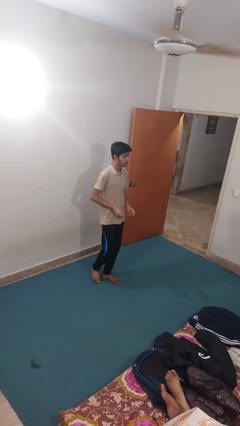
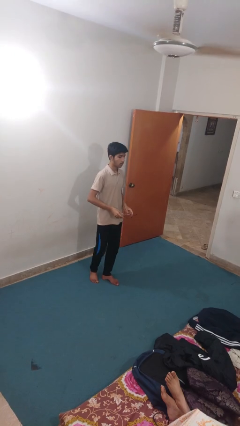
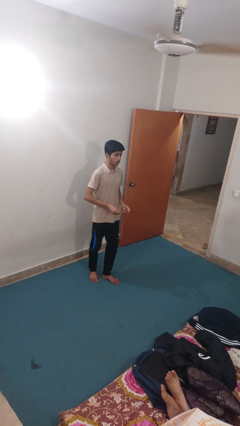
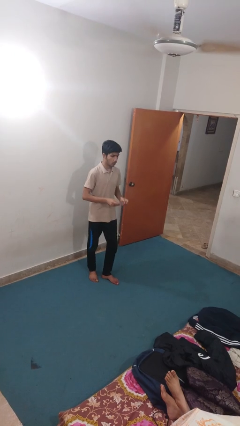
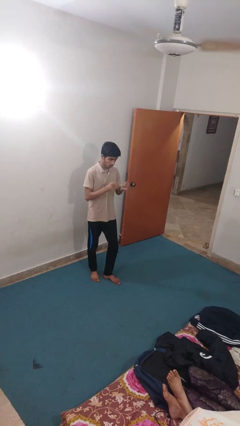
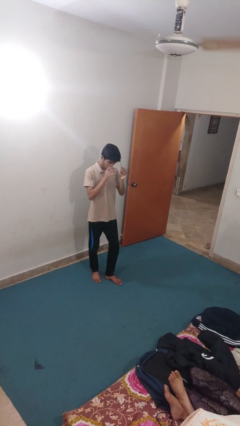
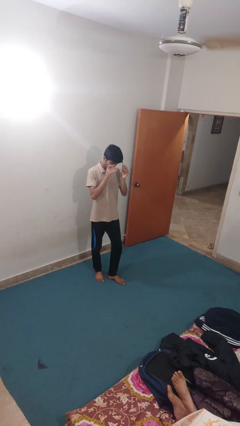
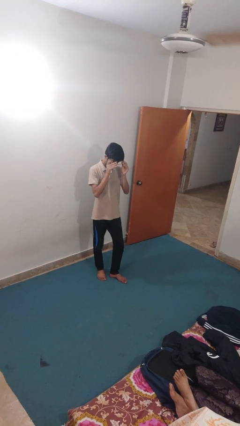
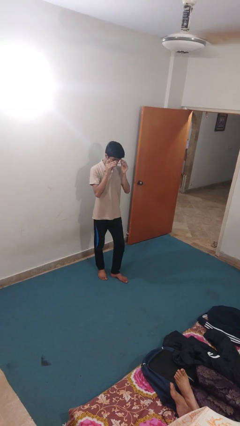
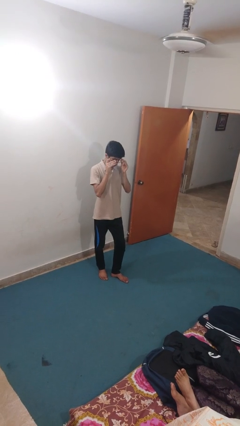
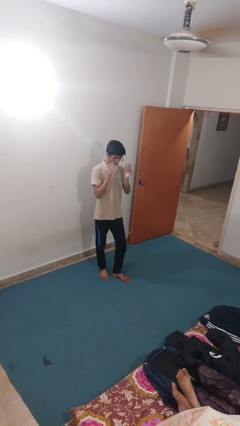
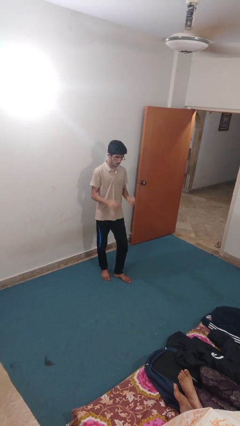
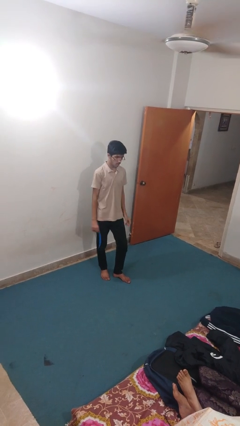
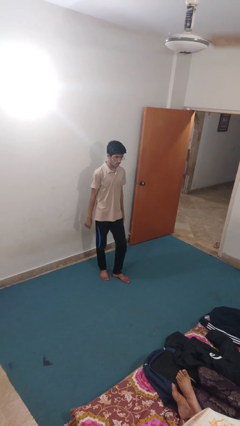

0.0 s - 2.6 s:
person puts on glasses

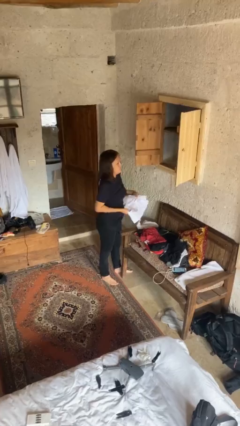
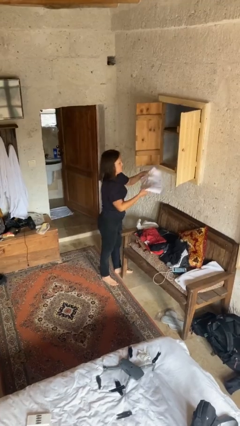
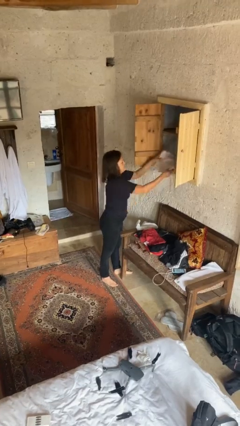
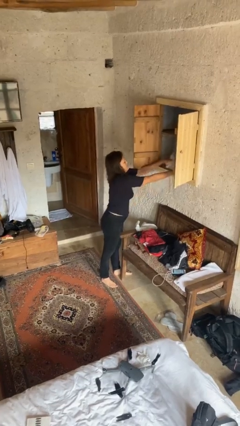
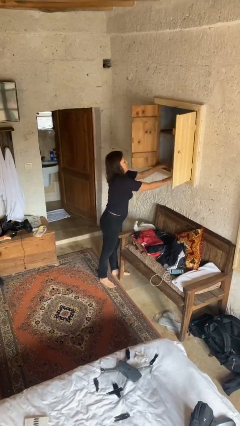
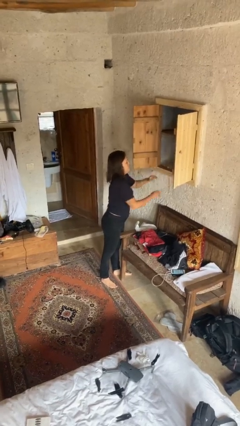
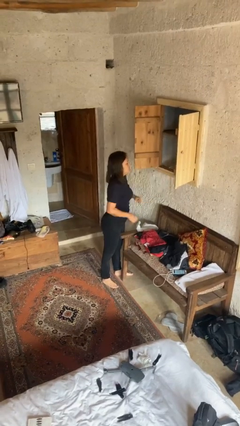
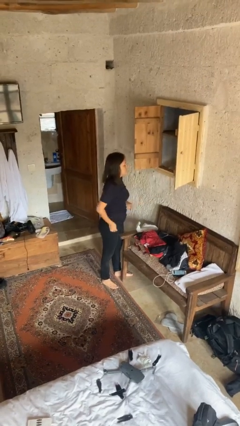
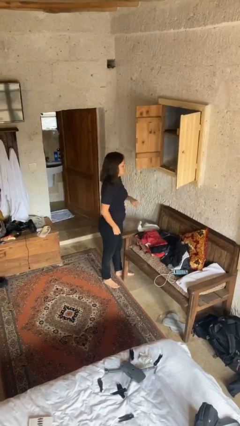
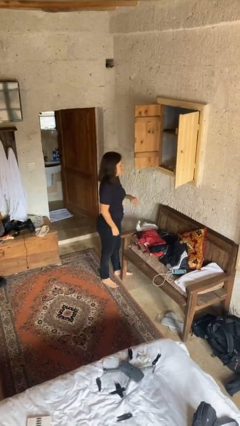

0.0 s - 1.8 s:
person puts clothes into dresser

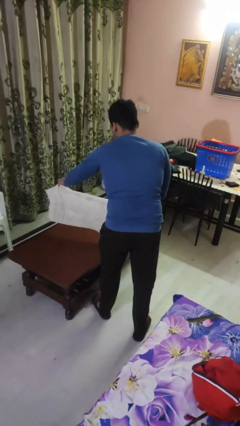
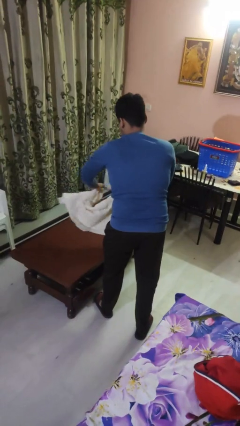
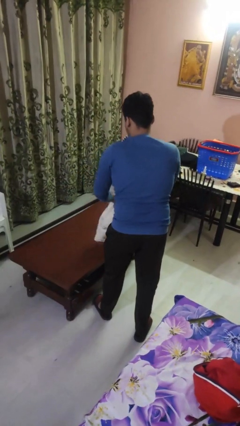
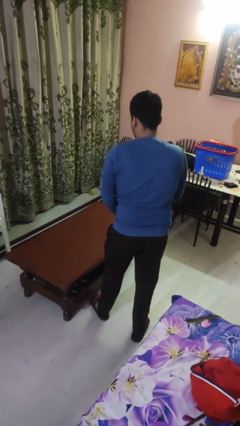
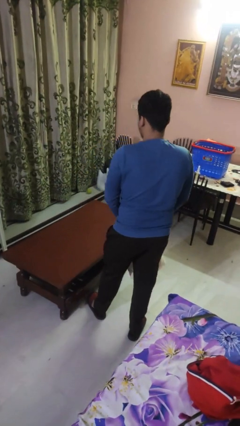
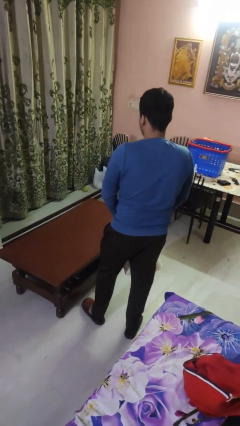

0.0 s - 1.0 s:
person folds tablecloth

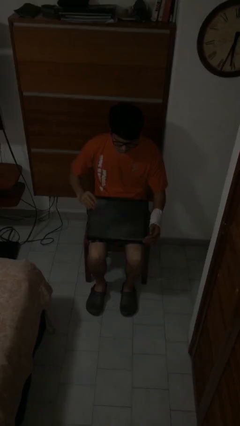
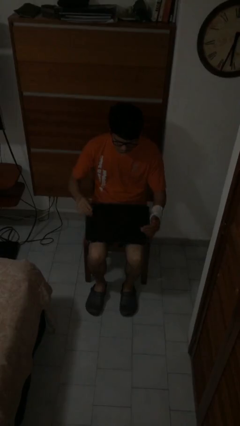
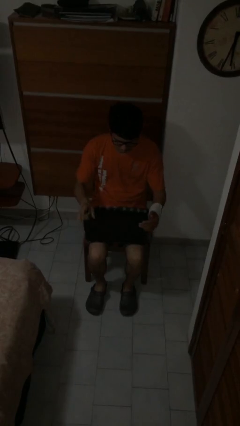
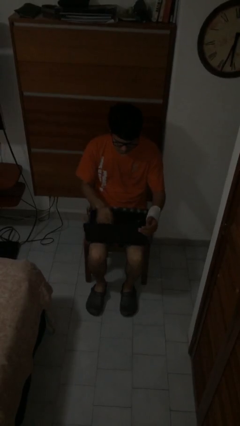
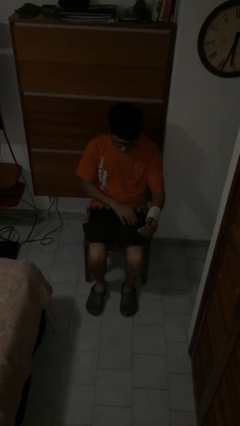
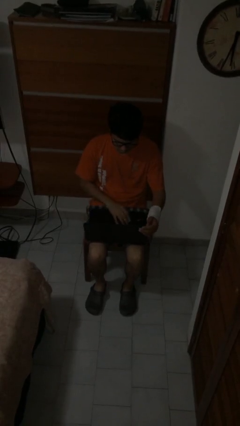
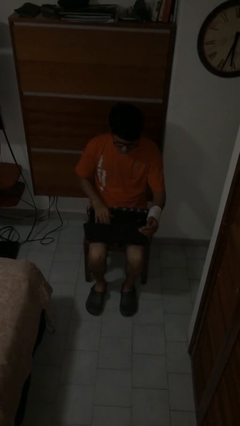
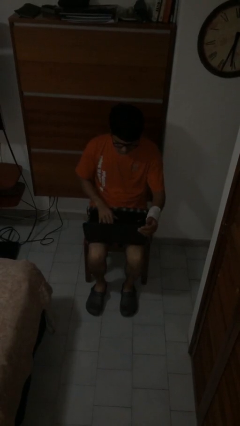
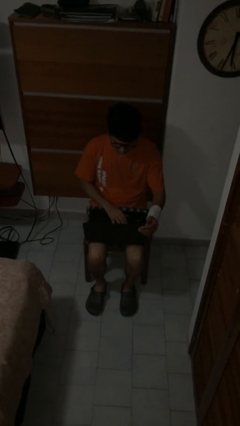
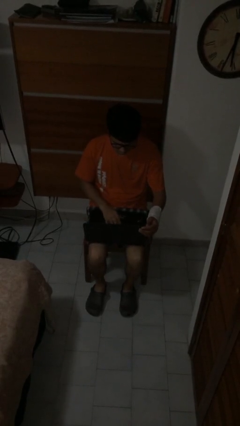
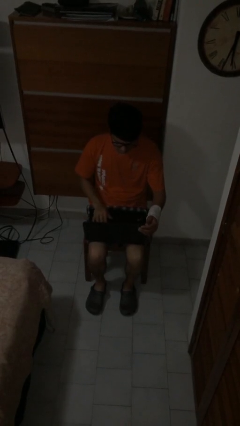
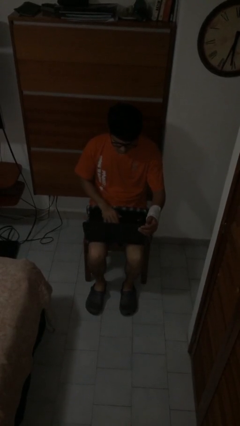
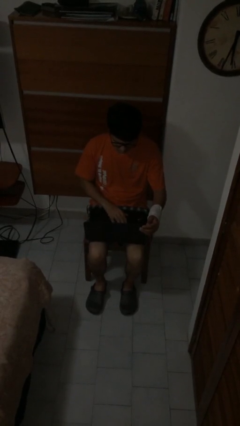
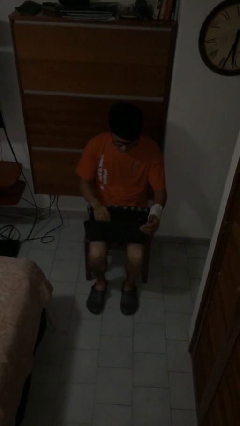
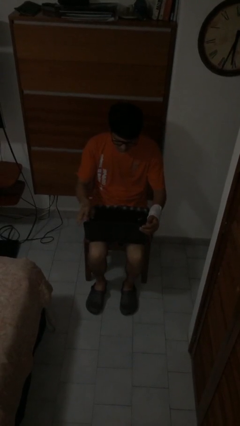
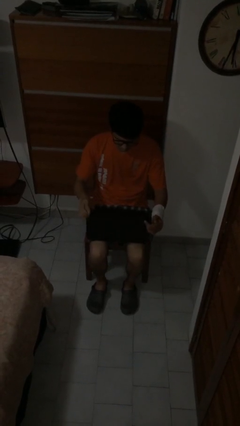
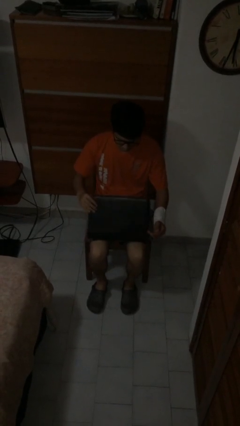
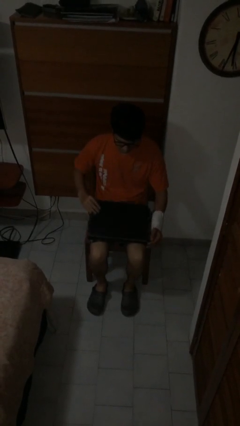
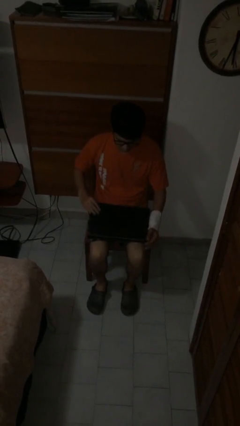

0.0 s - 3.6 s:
person interacts with laptop

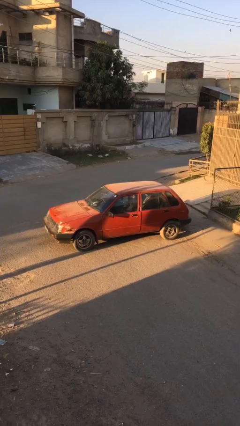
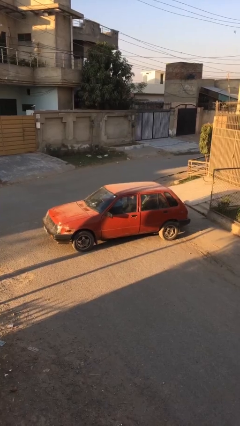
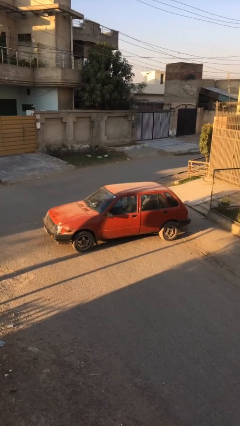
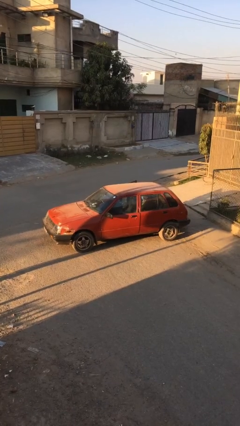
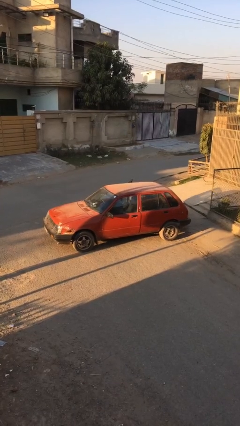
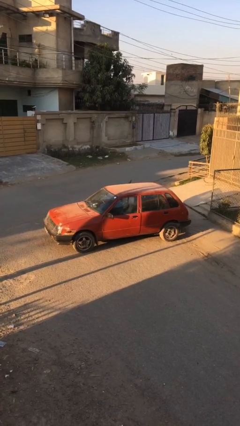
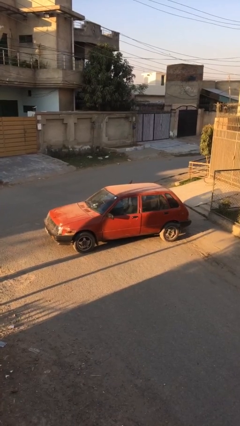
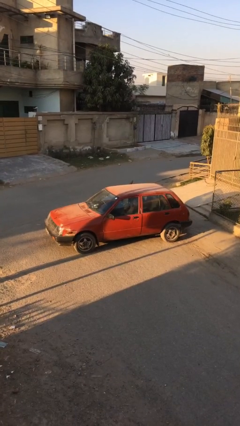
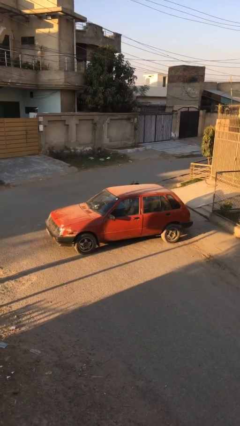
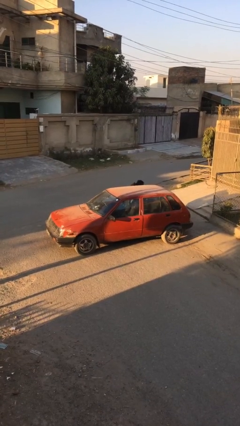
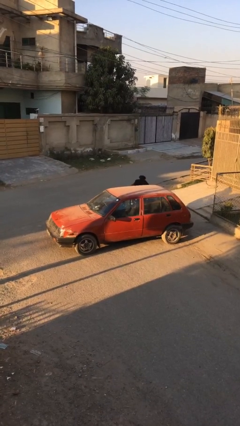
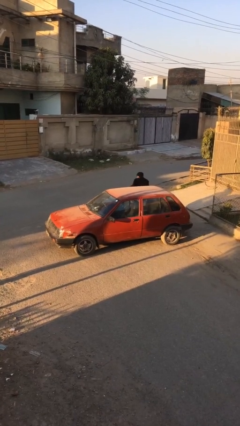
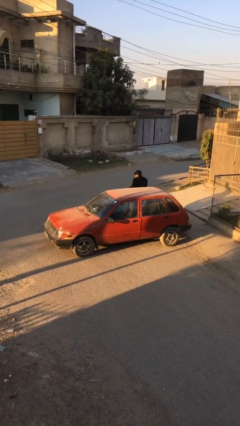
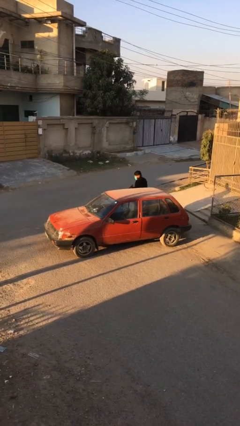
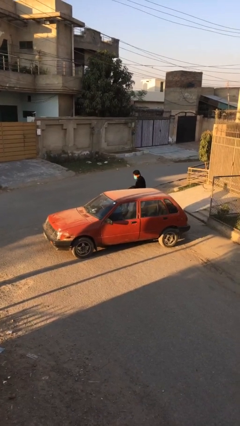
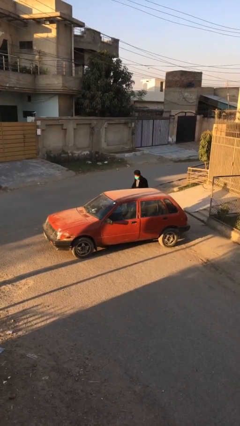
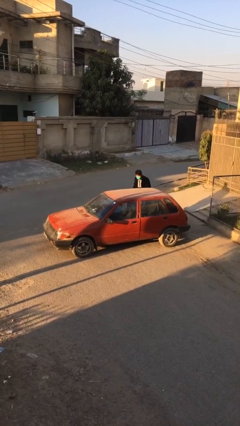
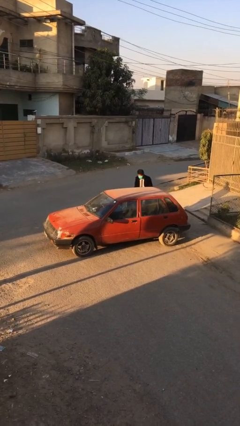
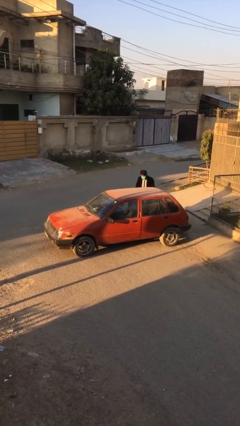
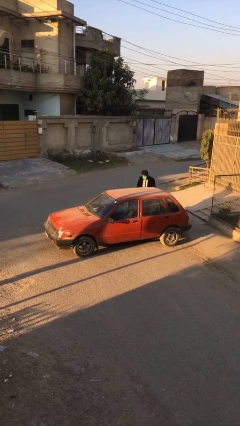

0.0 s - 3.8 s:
car drops off person

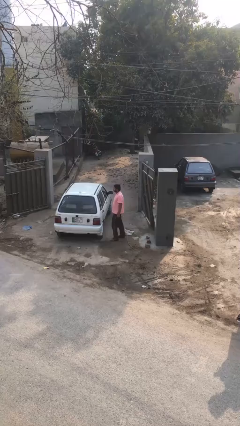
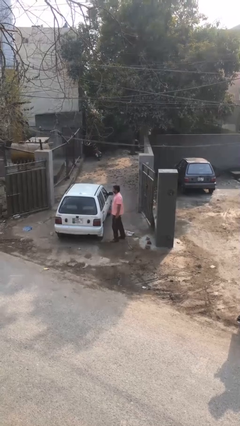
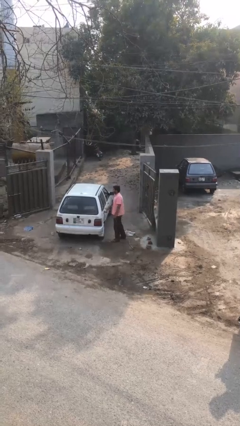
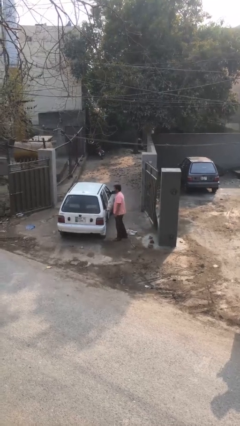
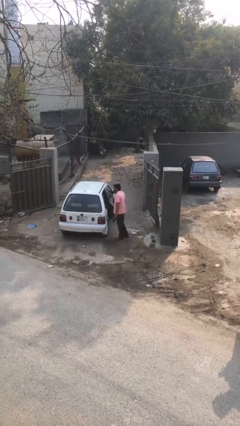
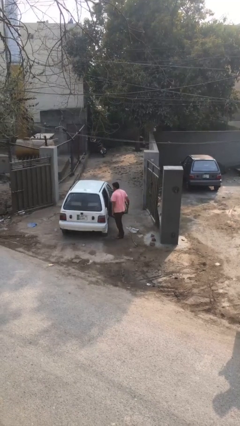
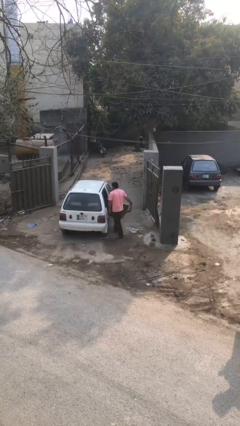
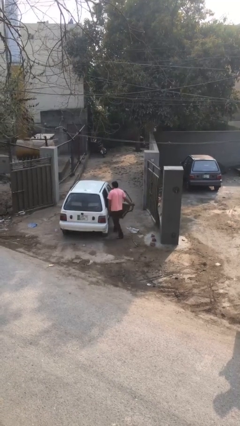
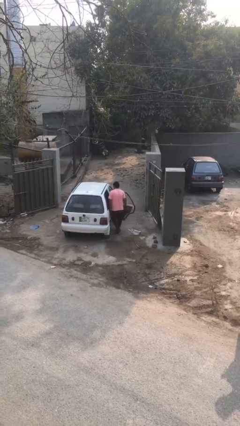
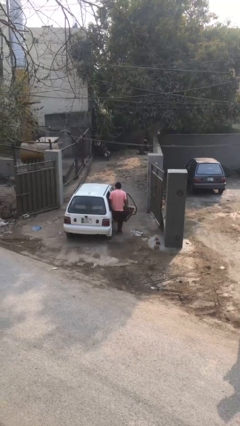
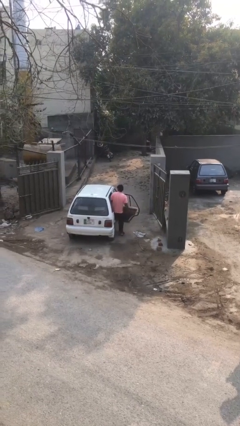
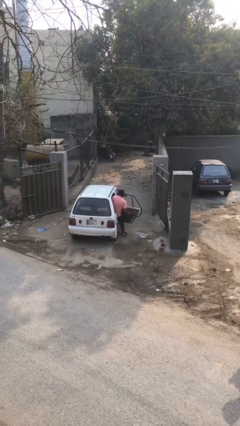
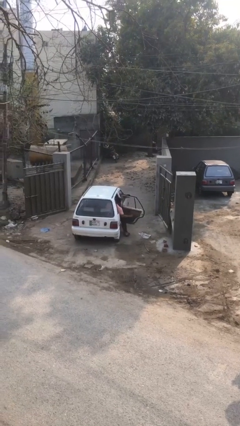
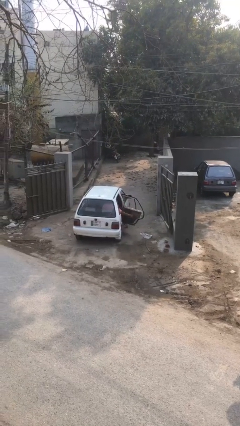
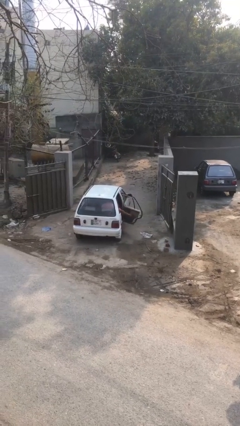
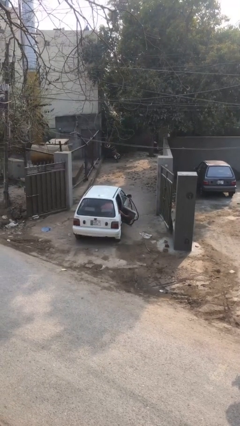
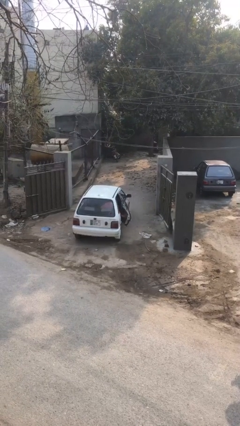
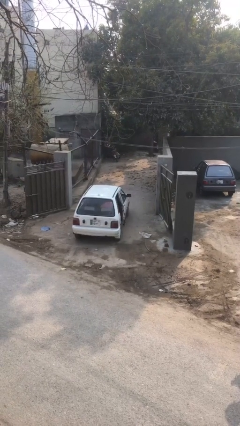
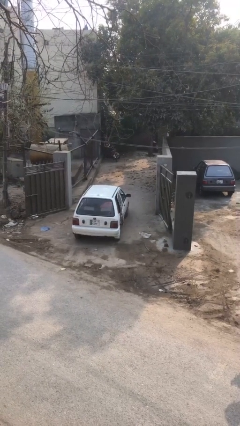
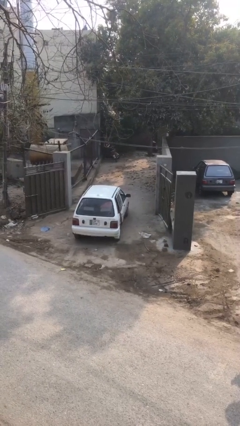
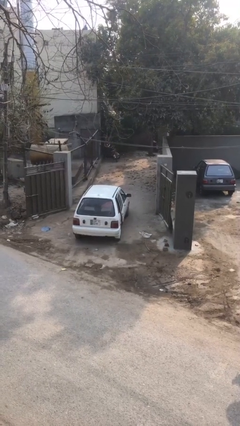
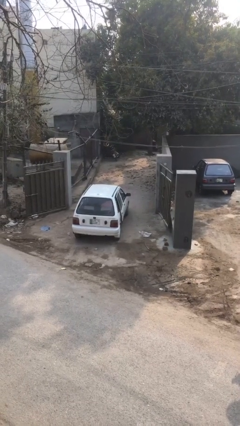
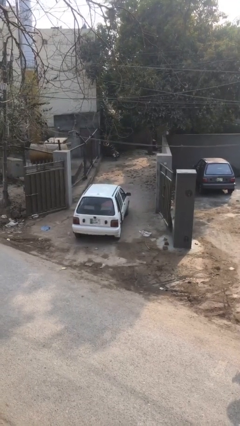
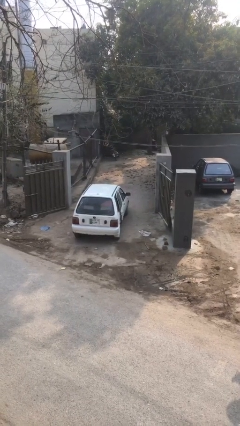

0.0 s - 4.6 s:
car picks up person

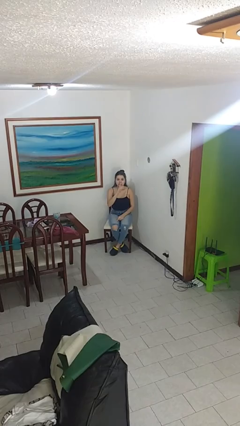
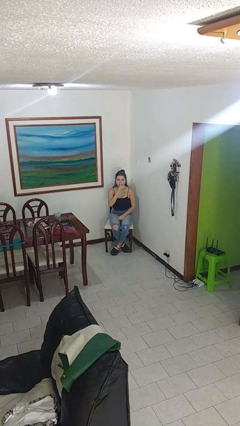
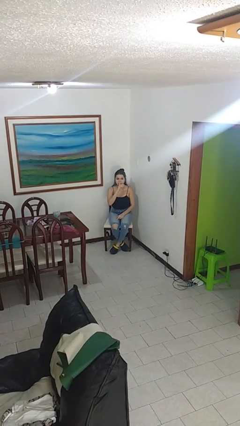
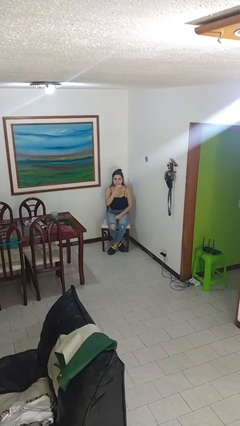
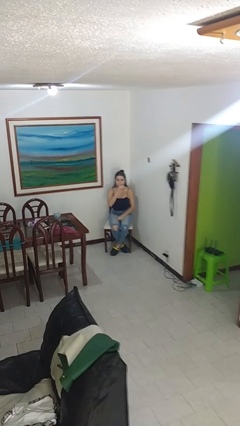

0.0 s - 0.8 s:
person gestures be quiet
